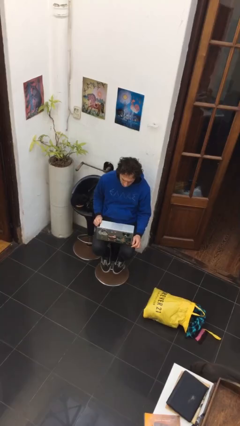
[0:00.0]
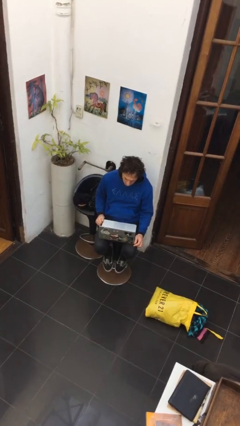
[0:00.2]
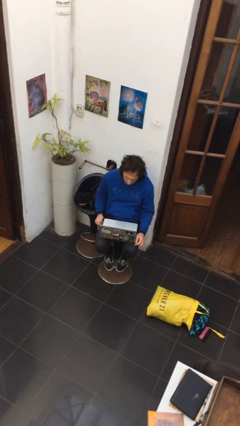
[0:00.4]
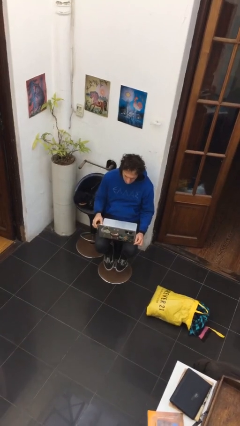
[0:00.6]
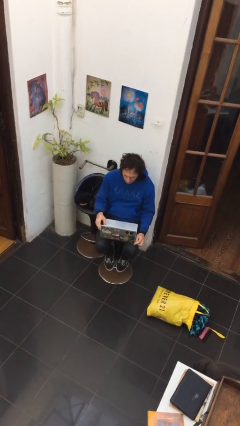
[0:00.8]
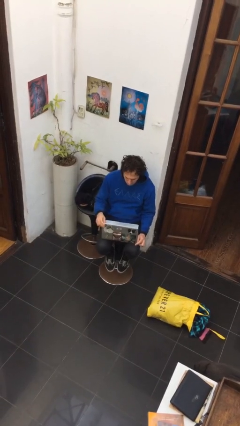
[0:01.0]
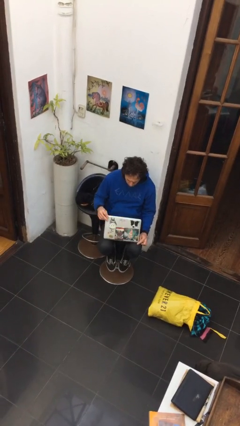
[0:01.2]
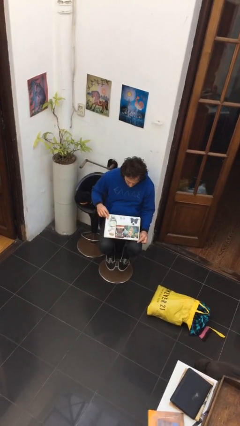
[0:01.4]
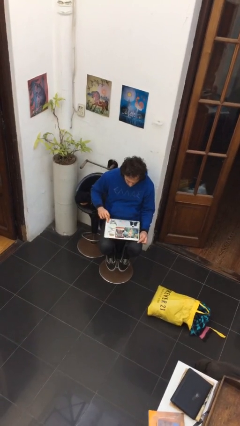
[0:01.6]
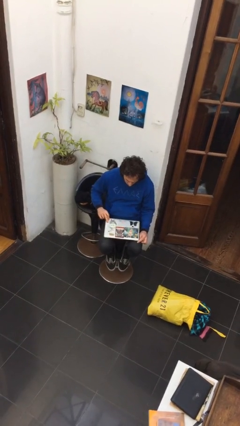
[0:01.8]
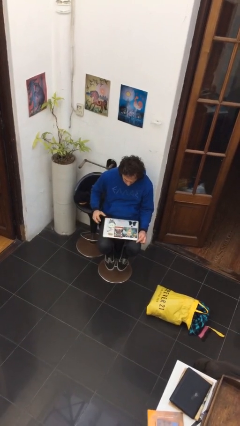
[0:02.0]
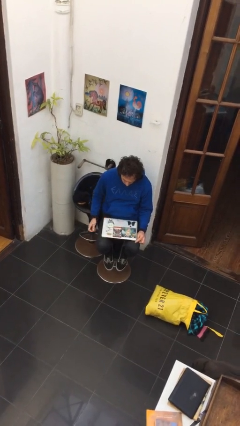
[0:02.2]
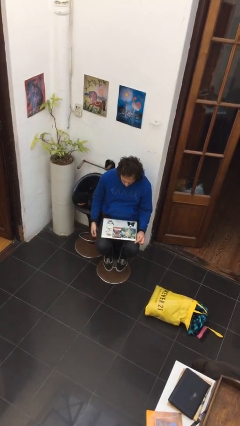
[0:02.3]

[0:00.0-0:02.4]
person closes laptop

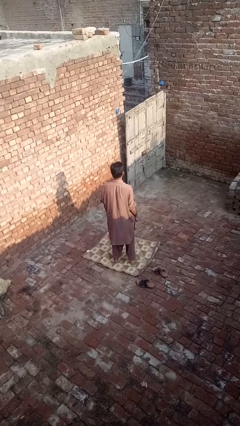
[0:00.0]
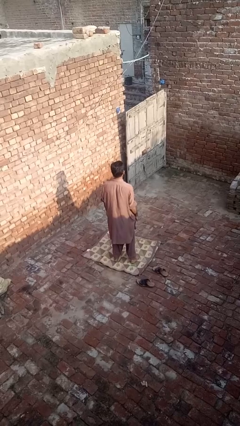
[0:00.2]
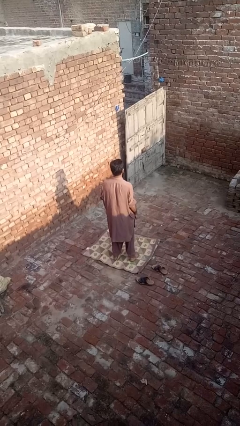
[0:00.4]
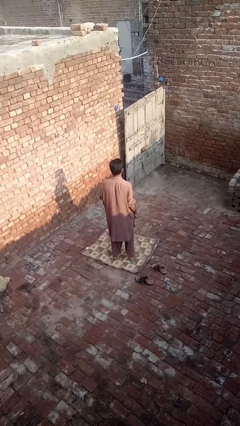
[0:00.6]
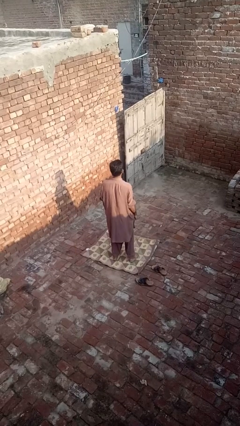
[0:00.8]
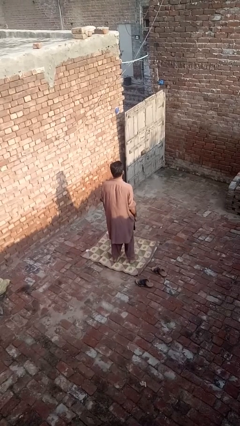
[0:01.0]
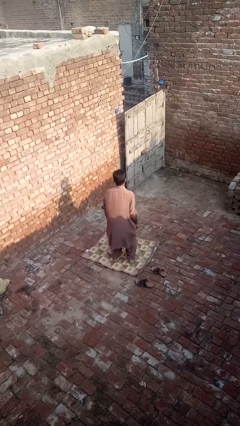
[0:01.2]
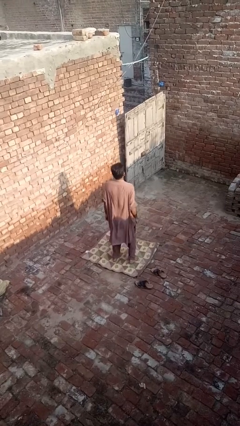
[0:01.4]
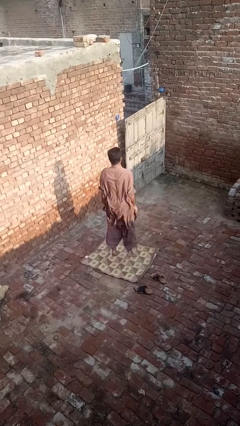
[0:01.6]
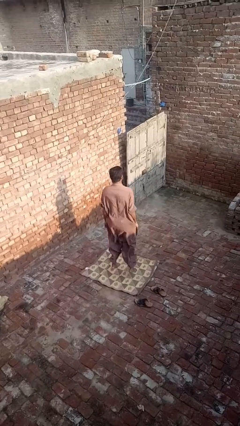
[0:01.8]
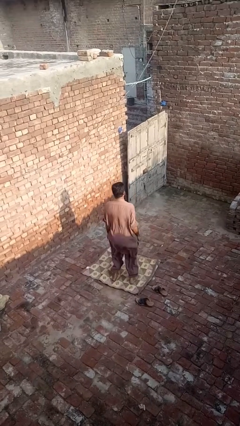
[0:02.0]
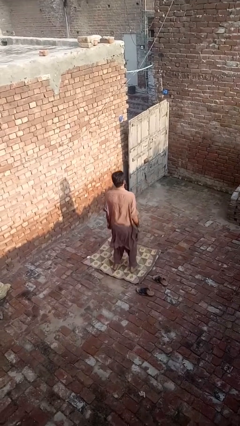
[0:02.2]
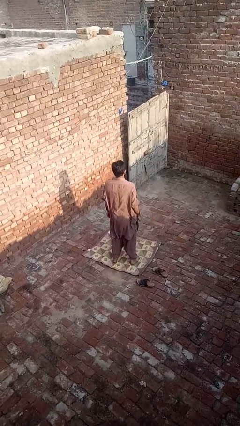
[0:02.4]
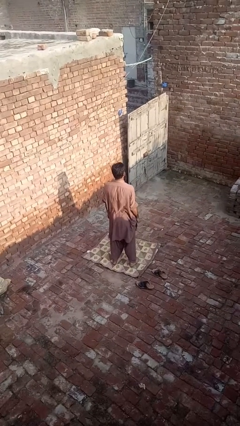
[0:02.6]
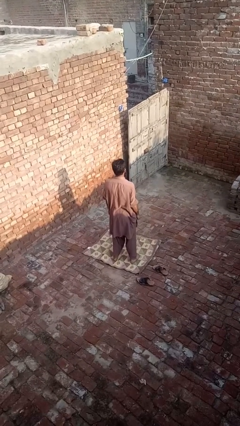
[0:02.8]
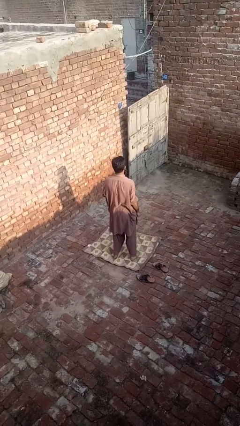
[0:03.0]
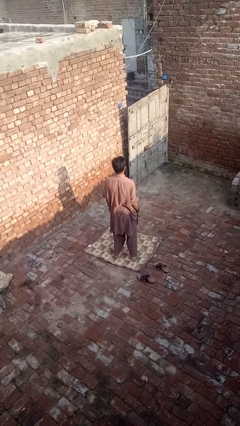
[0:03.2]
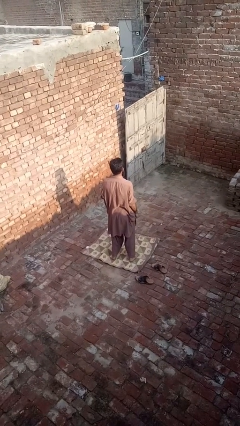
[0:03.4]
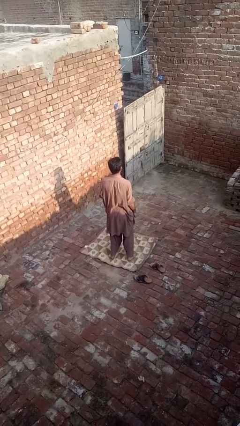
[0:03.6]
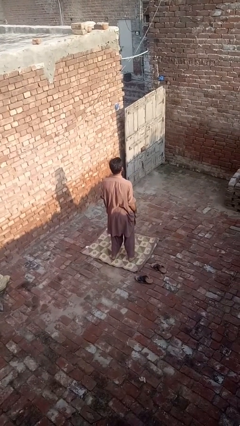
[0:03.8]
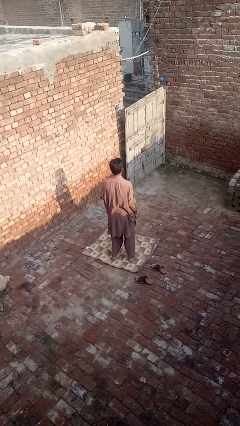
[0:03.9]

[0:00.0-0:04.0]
person jumps

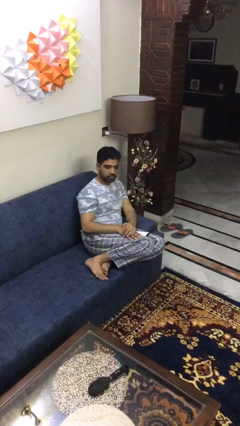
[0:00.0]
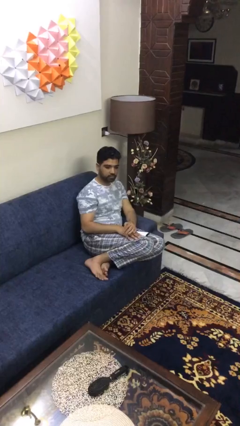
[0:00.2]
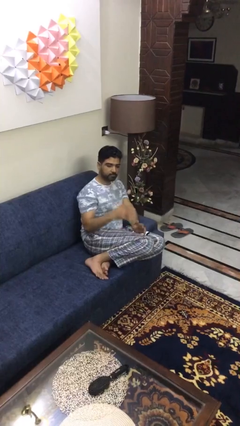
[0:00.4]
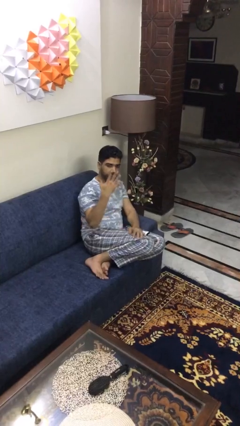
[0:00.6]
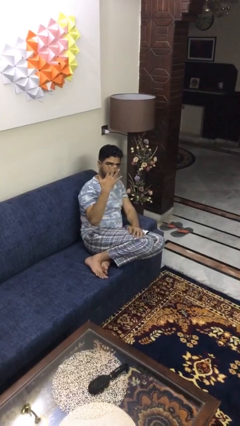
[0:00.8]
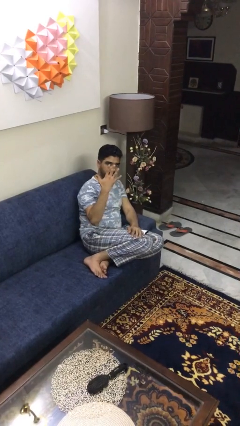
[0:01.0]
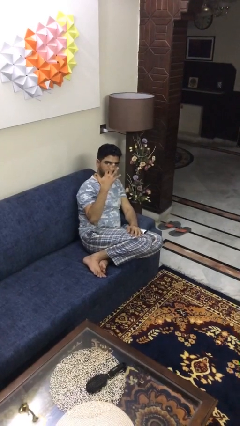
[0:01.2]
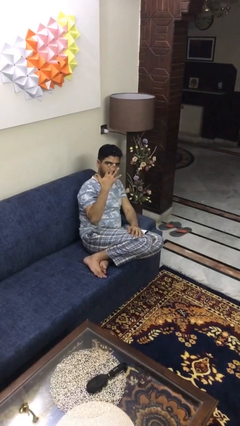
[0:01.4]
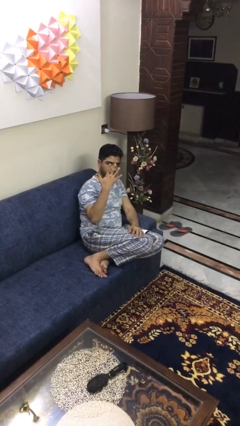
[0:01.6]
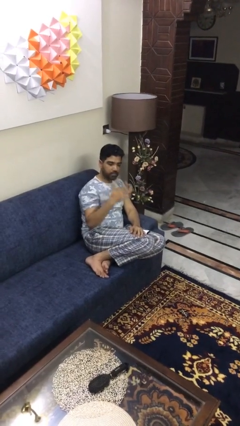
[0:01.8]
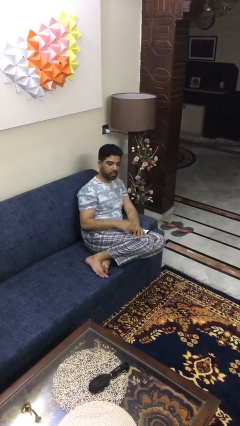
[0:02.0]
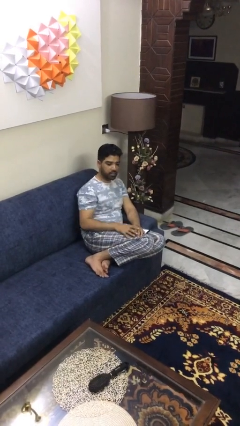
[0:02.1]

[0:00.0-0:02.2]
person gestures number five

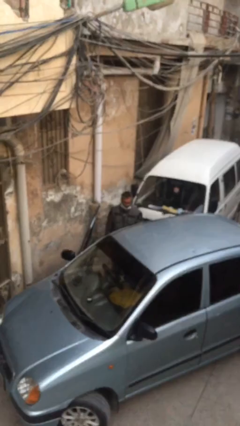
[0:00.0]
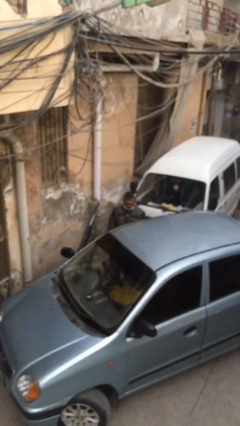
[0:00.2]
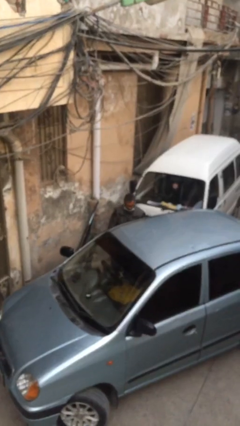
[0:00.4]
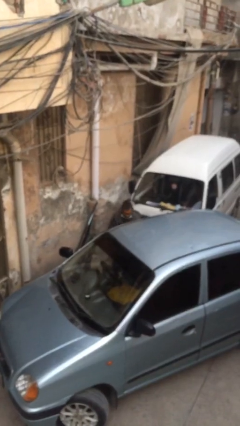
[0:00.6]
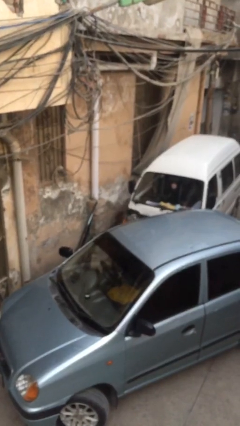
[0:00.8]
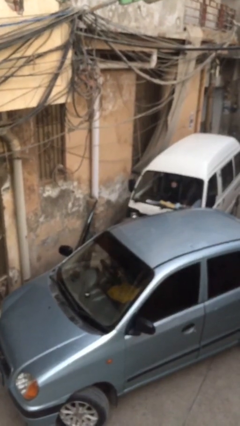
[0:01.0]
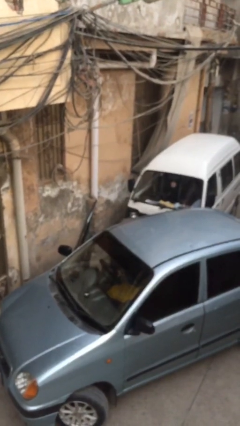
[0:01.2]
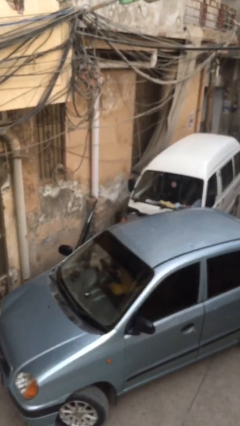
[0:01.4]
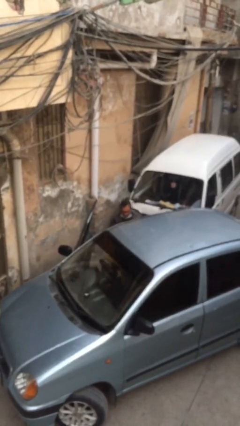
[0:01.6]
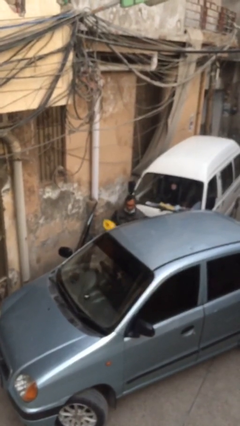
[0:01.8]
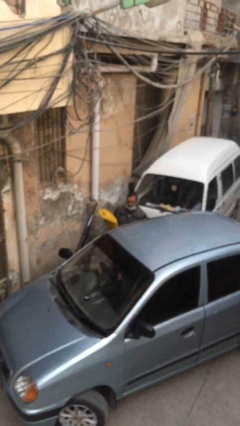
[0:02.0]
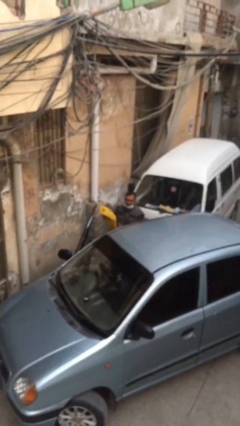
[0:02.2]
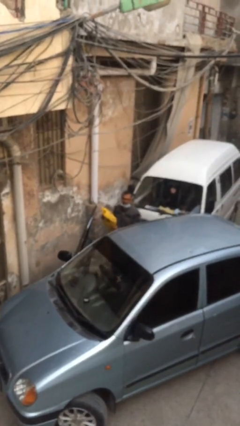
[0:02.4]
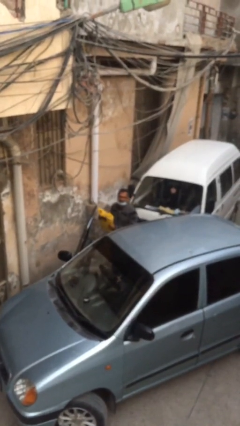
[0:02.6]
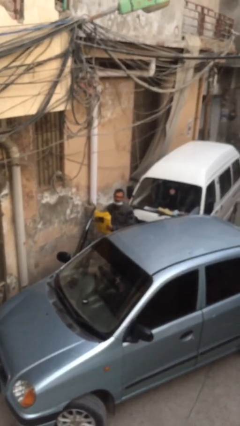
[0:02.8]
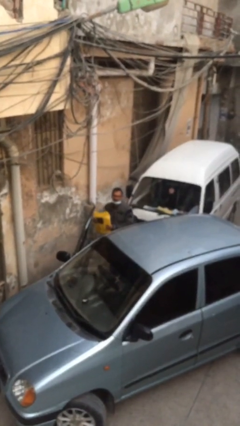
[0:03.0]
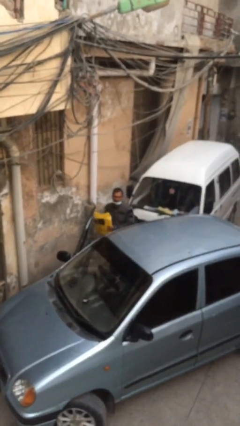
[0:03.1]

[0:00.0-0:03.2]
person unloads car

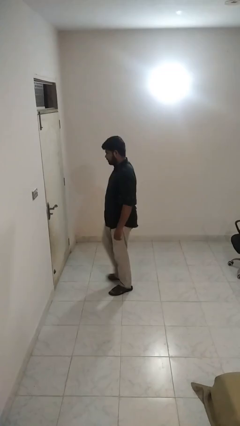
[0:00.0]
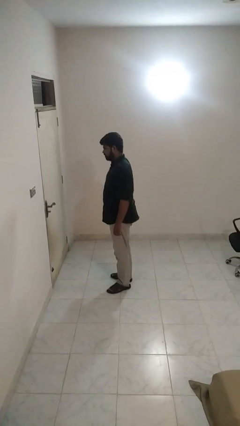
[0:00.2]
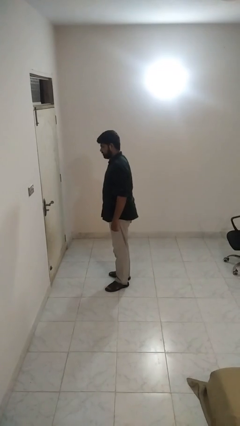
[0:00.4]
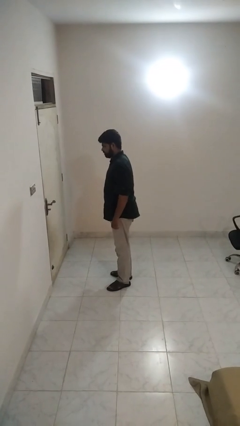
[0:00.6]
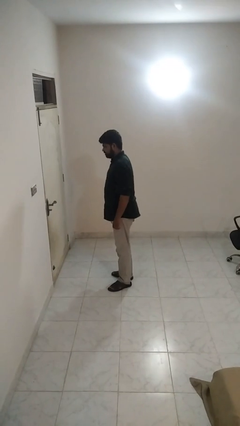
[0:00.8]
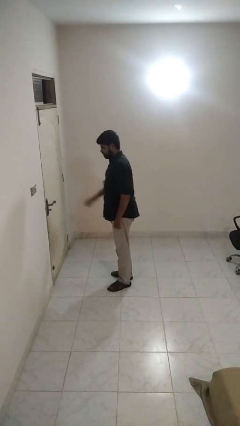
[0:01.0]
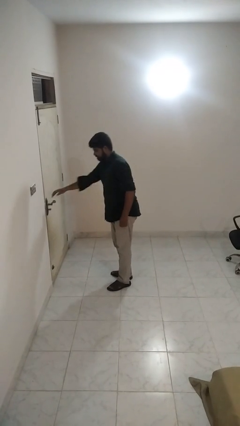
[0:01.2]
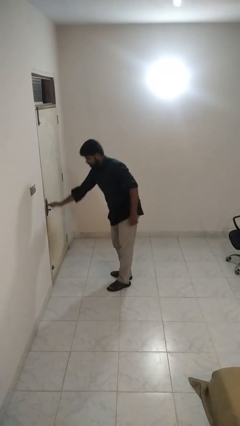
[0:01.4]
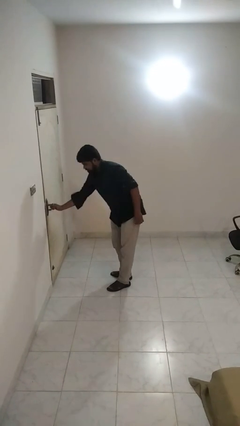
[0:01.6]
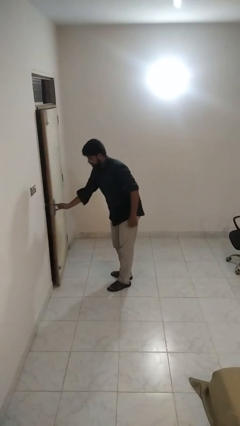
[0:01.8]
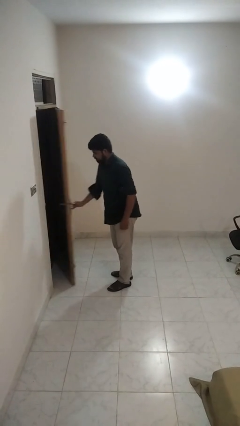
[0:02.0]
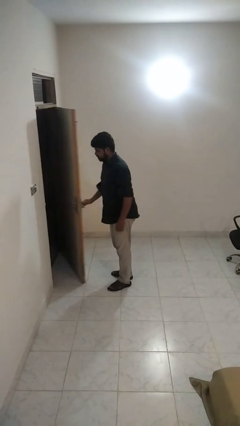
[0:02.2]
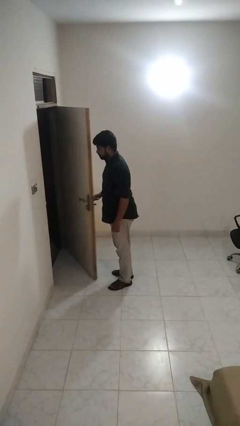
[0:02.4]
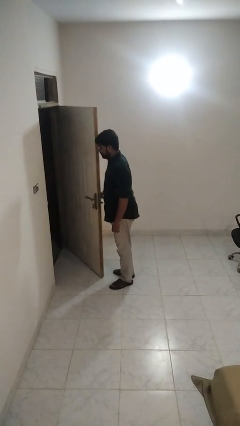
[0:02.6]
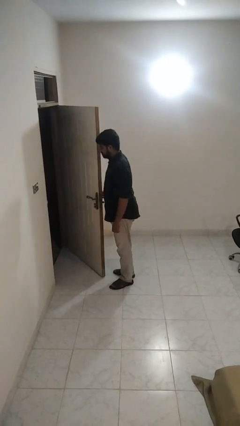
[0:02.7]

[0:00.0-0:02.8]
person opens facility door

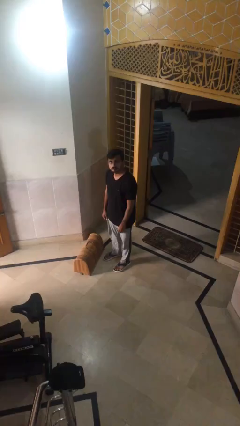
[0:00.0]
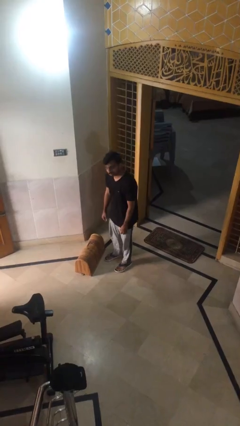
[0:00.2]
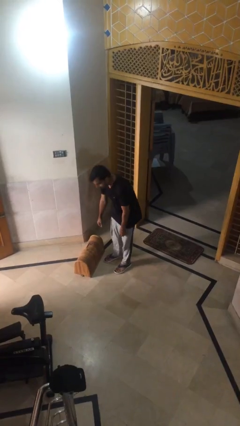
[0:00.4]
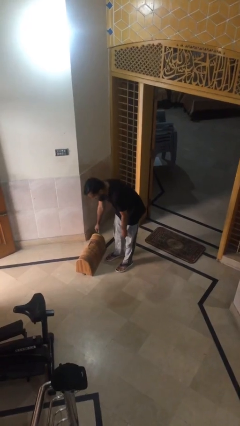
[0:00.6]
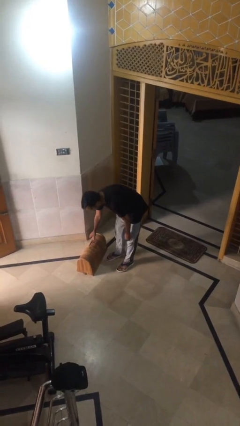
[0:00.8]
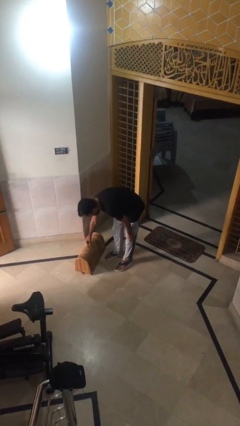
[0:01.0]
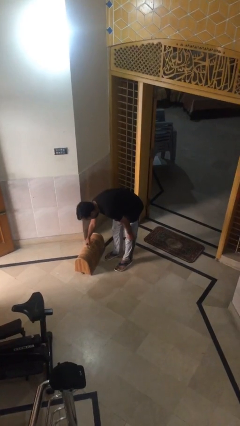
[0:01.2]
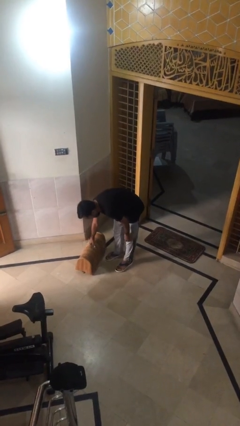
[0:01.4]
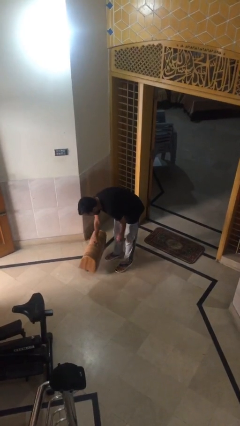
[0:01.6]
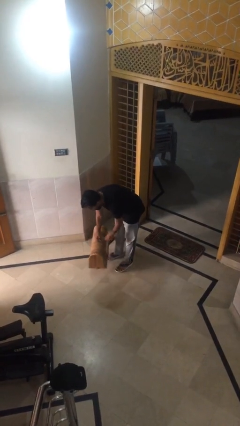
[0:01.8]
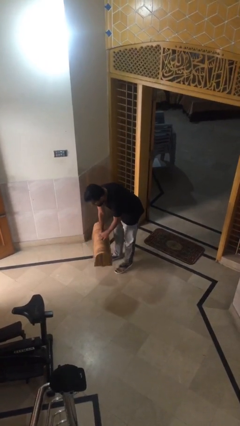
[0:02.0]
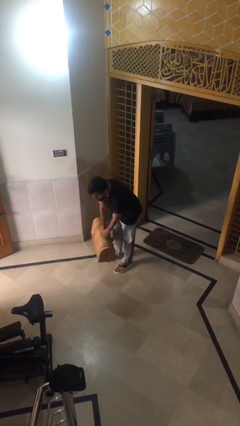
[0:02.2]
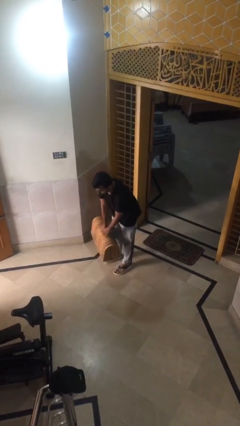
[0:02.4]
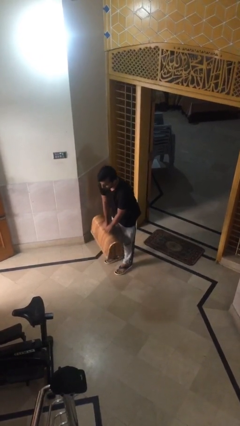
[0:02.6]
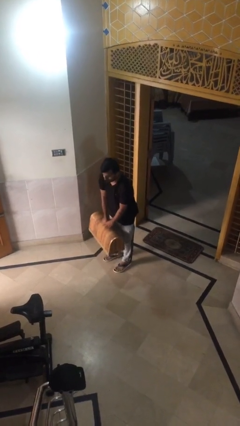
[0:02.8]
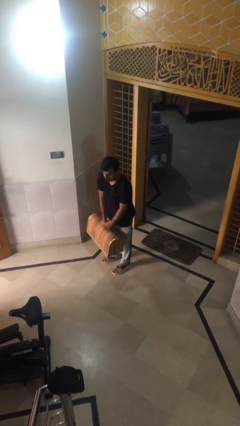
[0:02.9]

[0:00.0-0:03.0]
person picks up object from floor

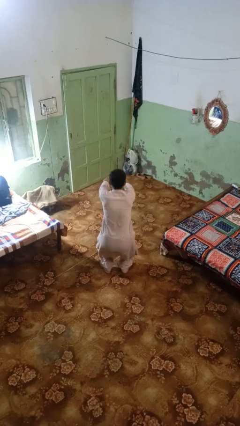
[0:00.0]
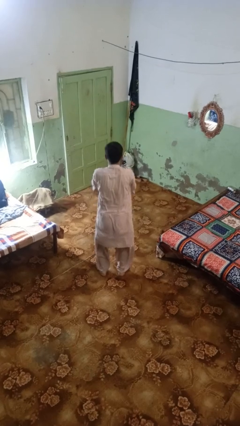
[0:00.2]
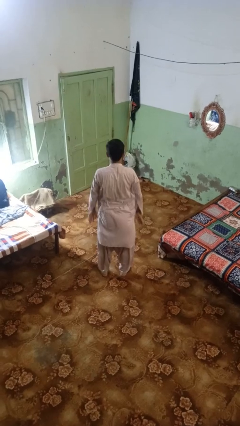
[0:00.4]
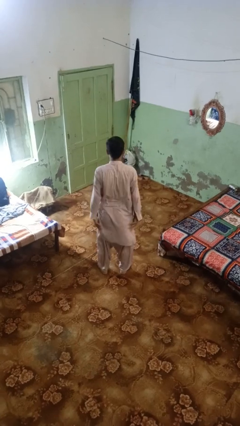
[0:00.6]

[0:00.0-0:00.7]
person stands up
